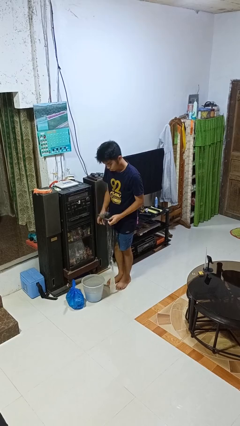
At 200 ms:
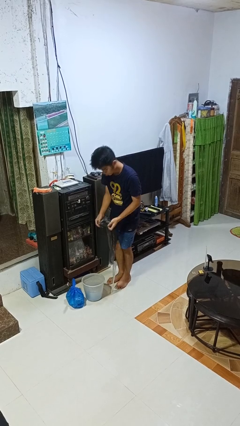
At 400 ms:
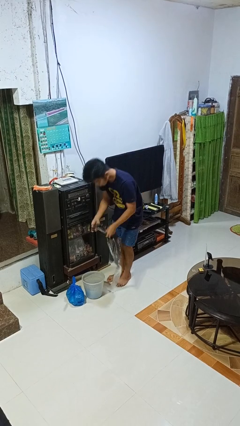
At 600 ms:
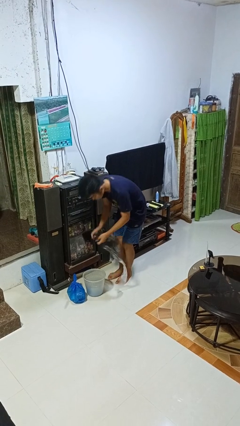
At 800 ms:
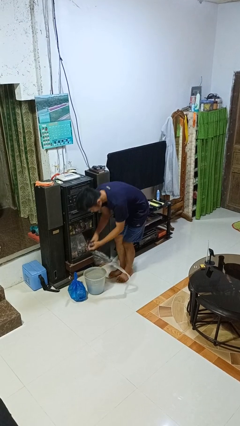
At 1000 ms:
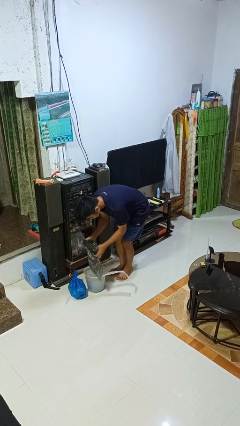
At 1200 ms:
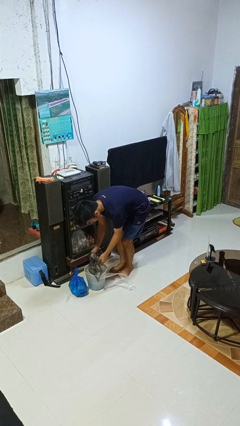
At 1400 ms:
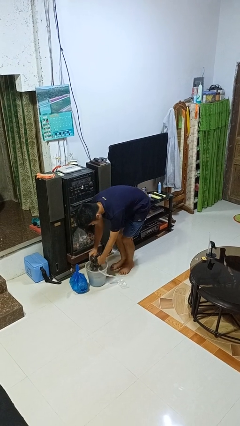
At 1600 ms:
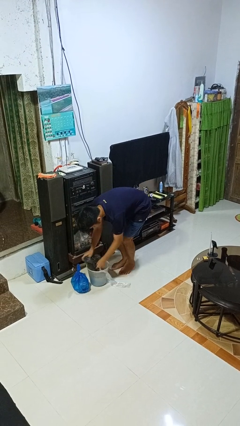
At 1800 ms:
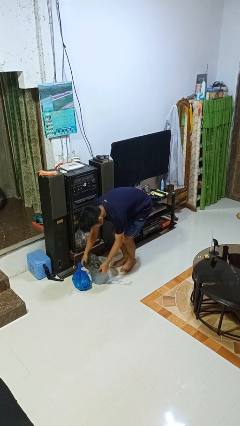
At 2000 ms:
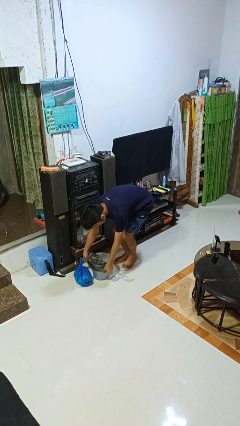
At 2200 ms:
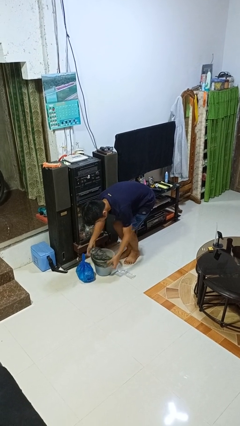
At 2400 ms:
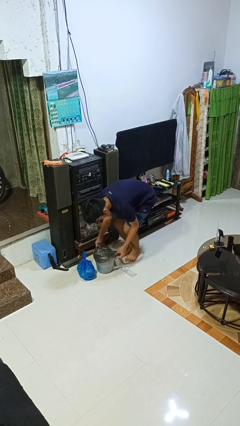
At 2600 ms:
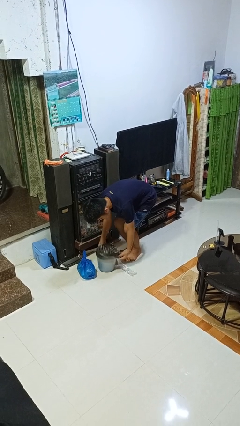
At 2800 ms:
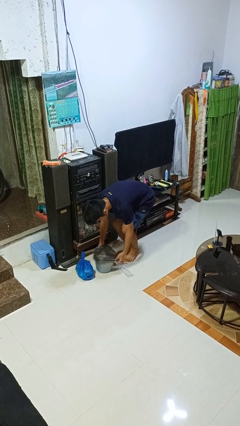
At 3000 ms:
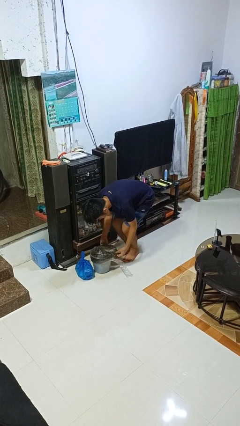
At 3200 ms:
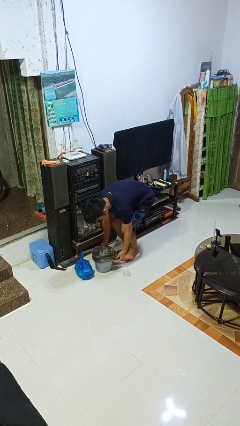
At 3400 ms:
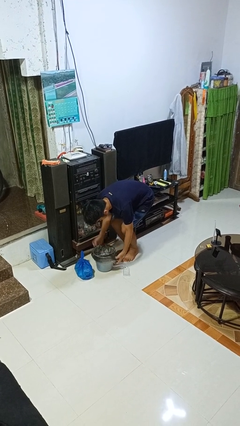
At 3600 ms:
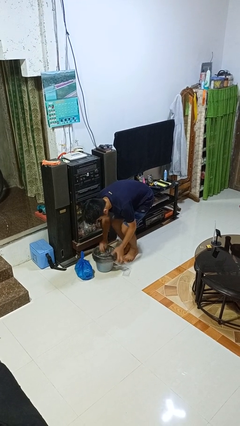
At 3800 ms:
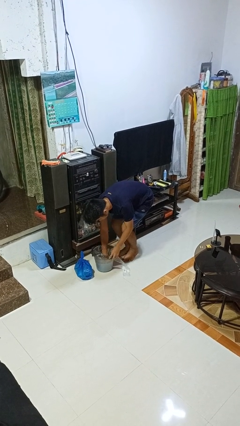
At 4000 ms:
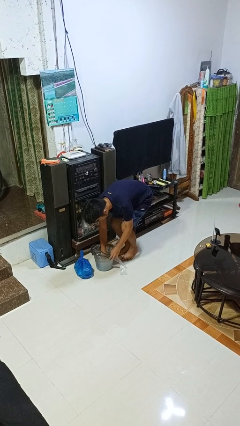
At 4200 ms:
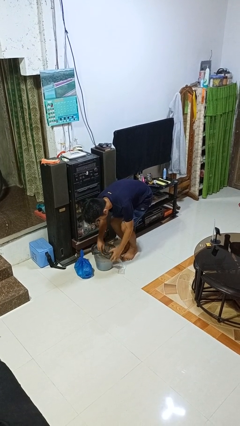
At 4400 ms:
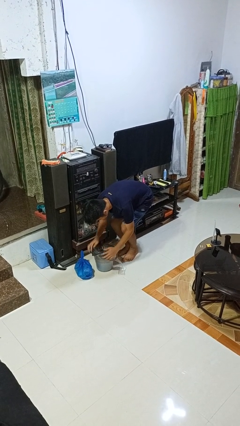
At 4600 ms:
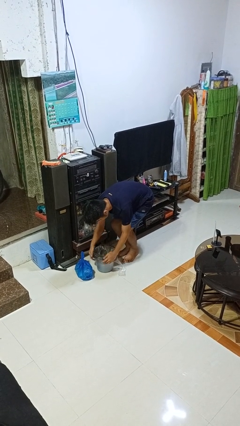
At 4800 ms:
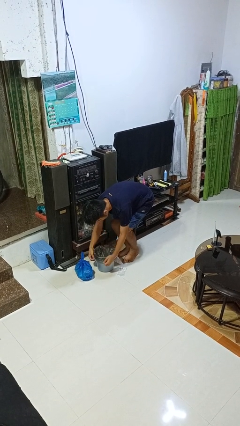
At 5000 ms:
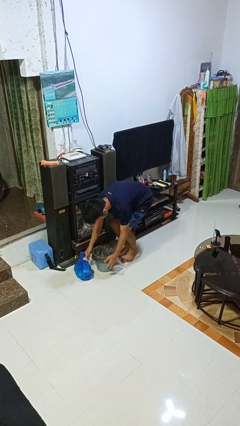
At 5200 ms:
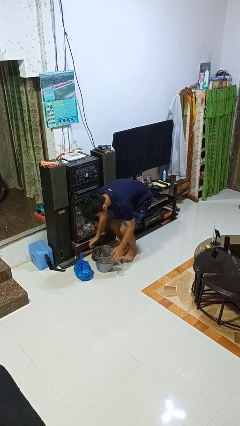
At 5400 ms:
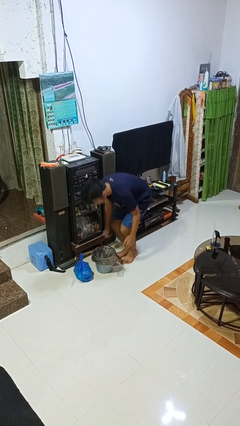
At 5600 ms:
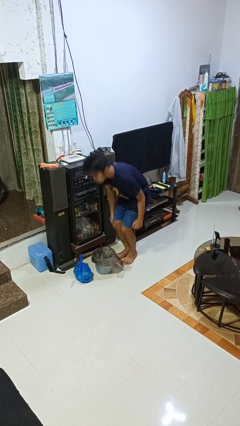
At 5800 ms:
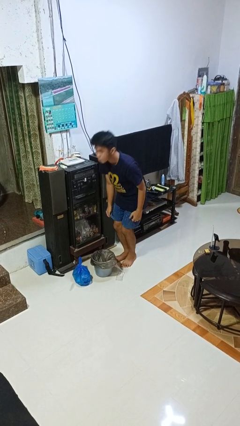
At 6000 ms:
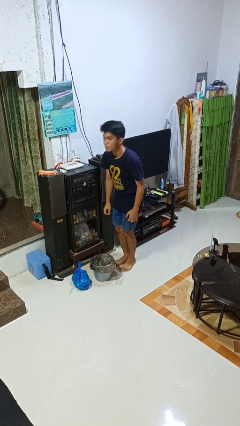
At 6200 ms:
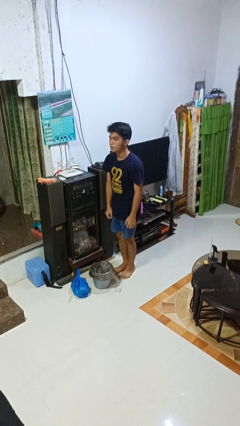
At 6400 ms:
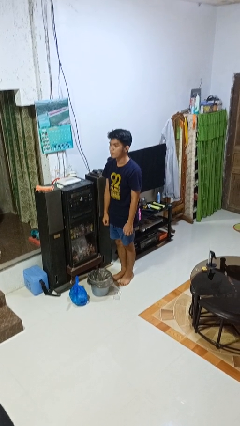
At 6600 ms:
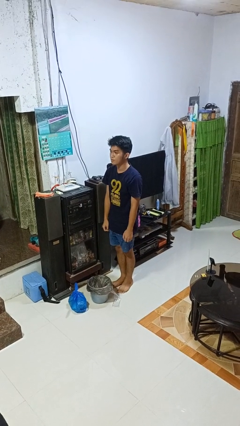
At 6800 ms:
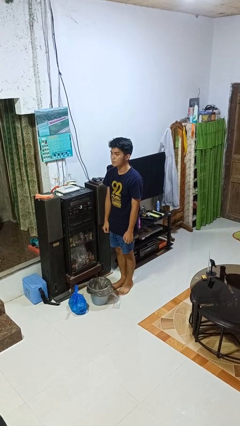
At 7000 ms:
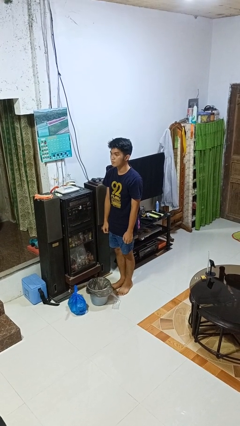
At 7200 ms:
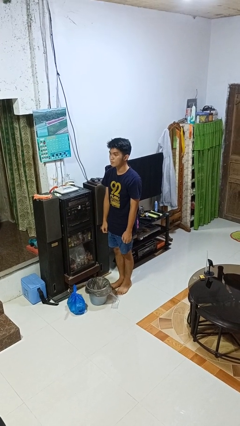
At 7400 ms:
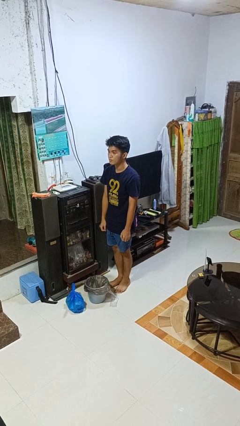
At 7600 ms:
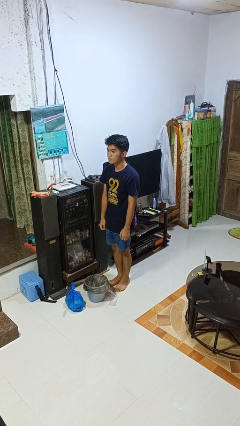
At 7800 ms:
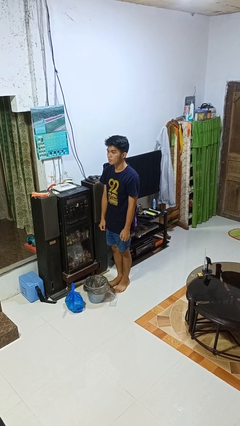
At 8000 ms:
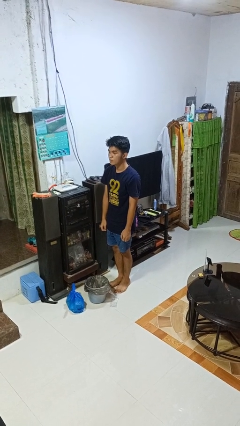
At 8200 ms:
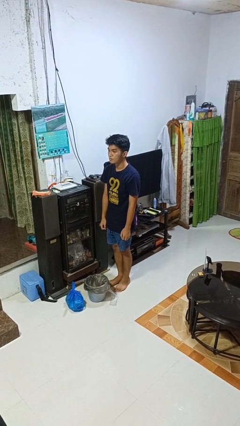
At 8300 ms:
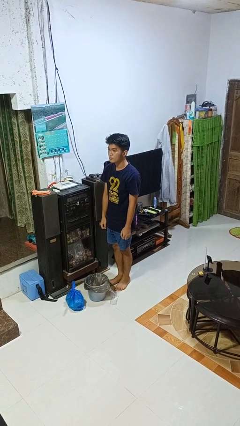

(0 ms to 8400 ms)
person inserts trashbag into trashcan

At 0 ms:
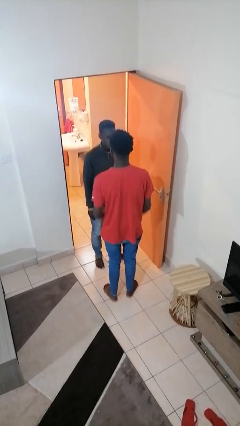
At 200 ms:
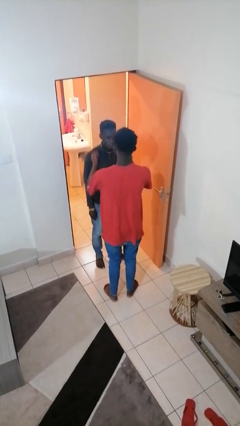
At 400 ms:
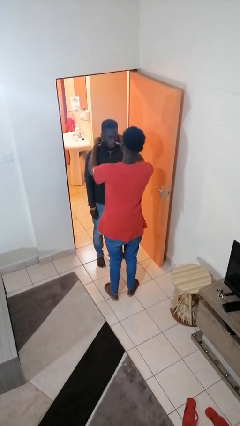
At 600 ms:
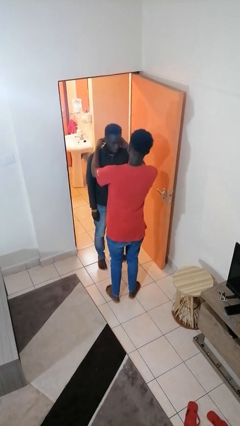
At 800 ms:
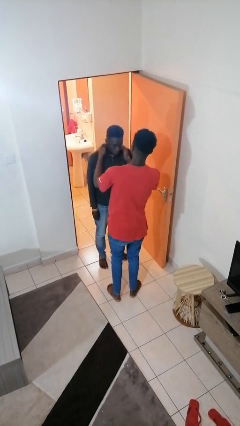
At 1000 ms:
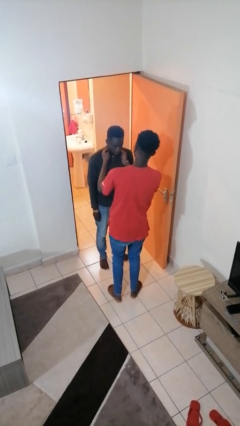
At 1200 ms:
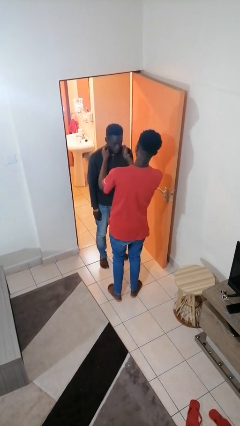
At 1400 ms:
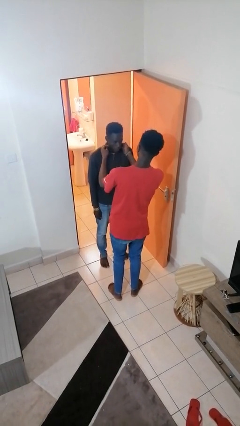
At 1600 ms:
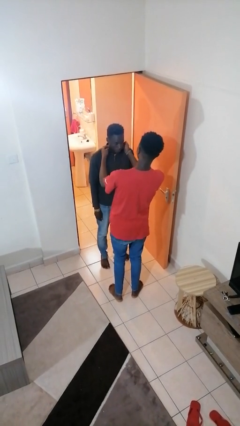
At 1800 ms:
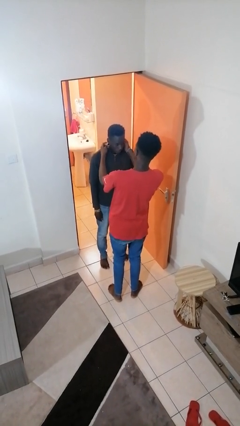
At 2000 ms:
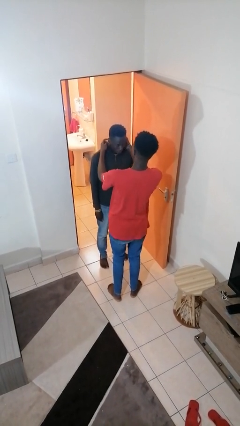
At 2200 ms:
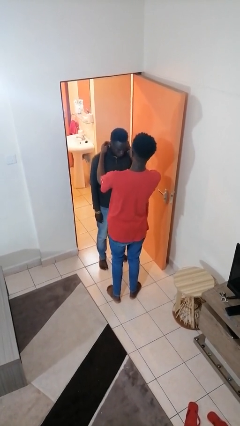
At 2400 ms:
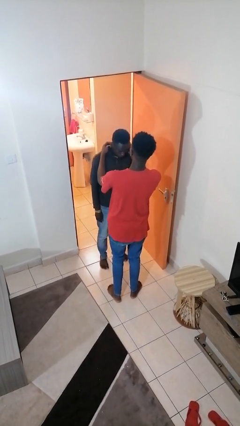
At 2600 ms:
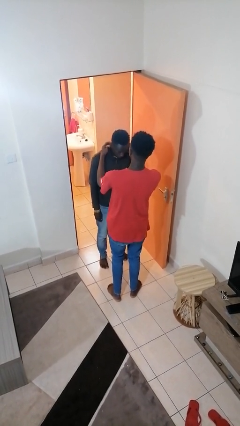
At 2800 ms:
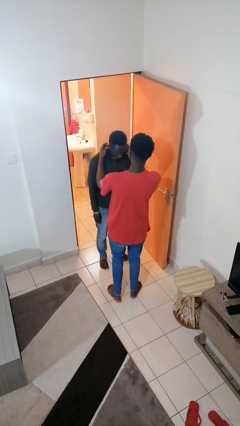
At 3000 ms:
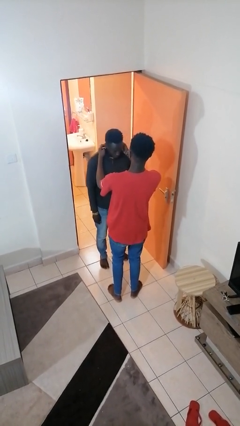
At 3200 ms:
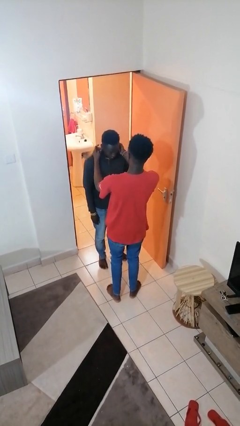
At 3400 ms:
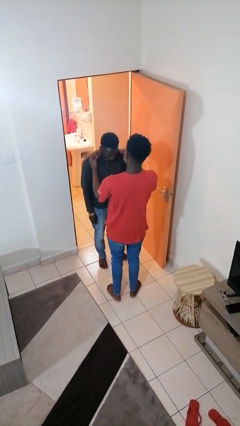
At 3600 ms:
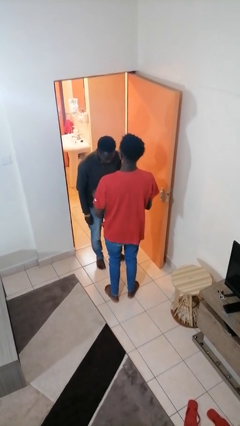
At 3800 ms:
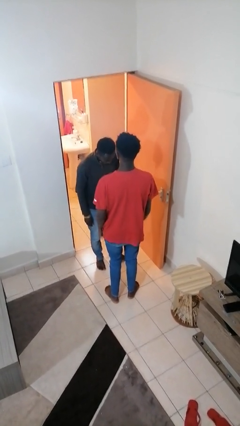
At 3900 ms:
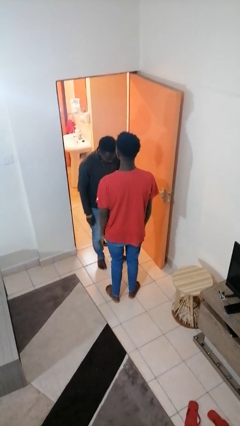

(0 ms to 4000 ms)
person tickles person

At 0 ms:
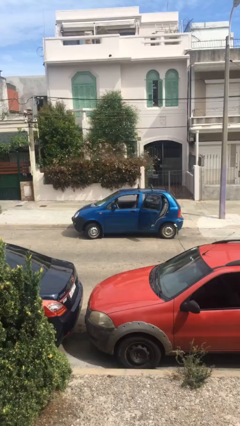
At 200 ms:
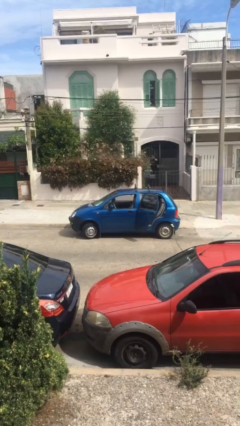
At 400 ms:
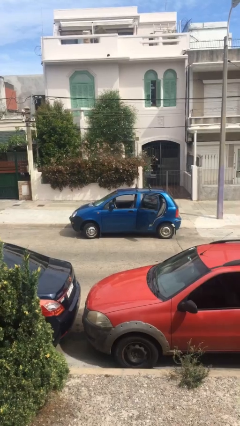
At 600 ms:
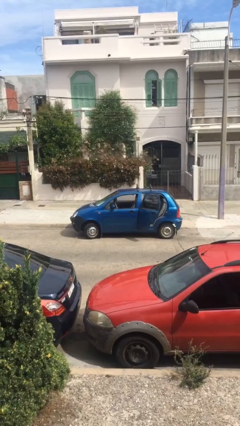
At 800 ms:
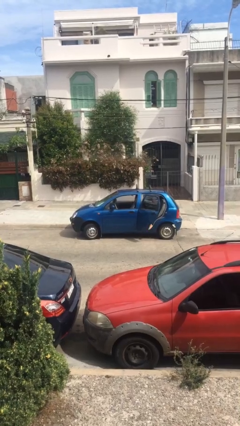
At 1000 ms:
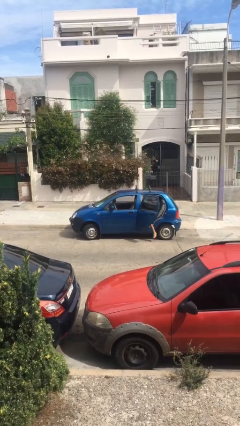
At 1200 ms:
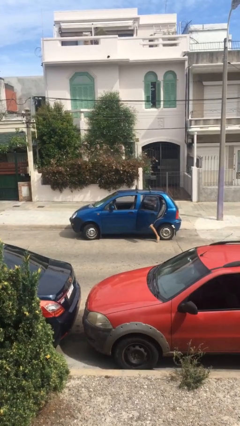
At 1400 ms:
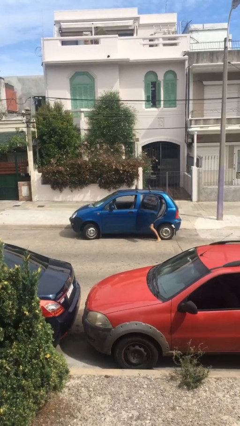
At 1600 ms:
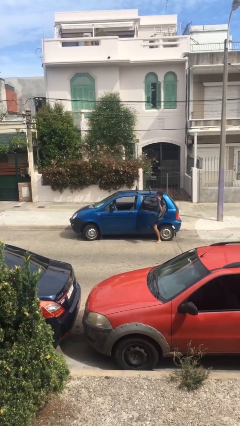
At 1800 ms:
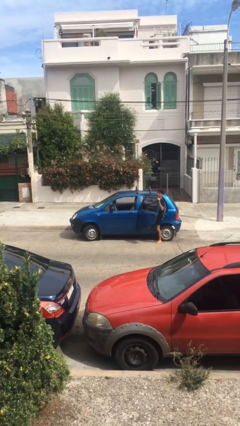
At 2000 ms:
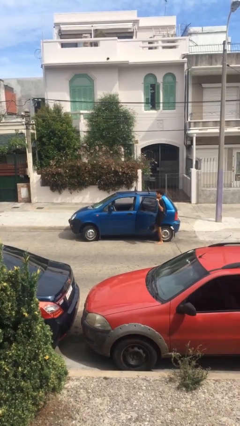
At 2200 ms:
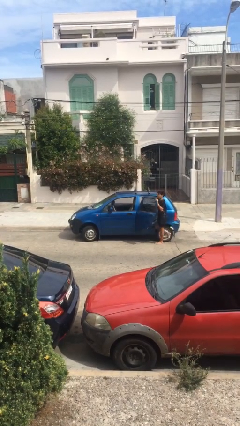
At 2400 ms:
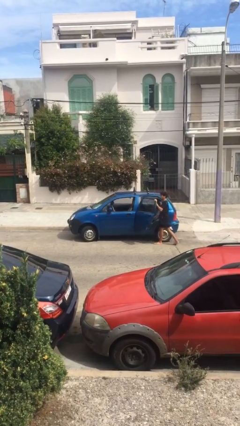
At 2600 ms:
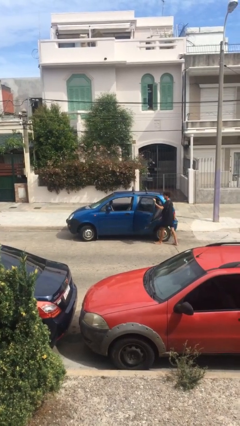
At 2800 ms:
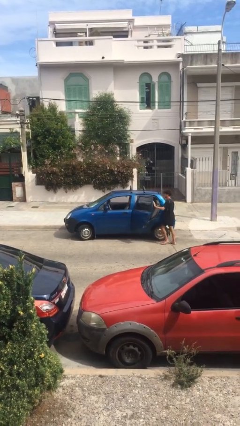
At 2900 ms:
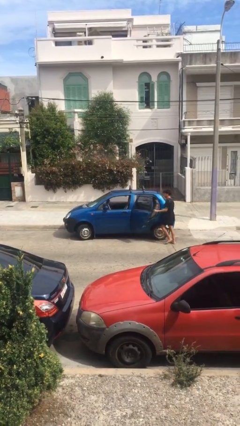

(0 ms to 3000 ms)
person exits car

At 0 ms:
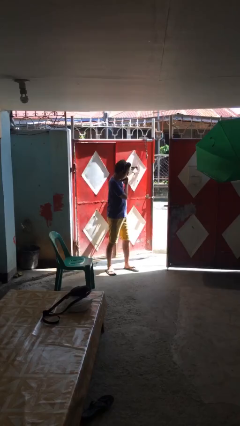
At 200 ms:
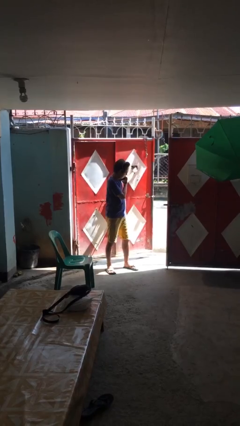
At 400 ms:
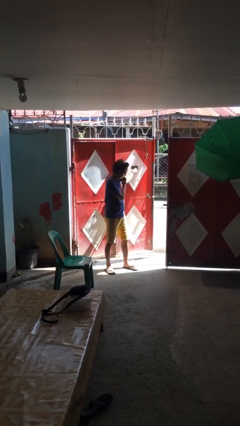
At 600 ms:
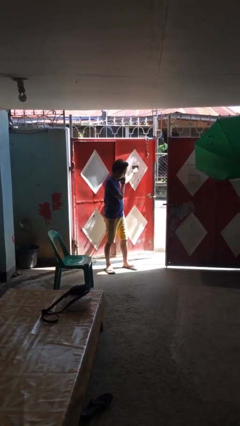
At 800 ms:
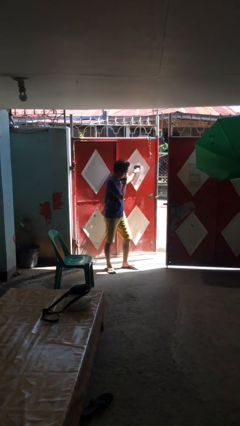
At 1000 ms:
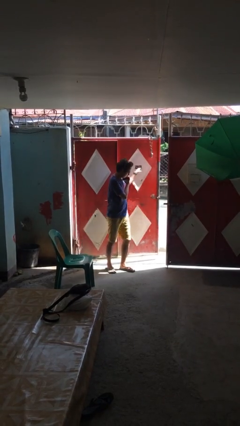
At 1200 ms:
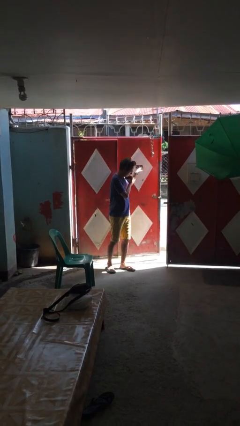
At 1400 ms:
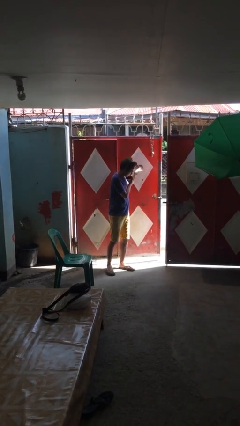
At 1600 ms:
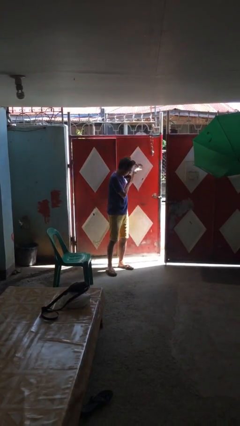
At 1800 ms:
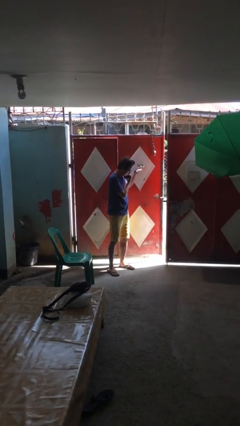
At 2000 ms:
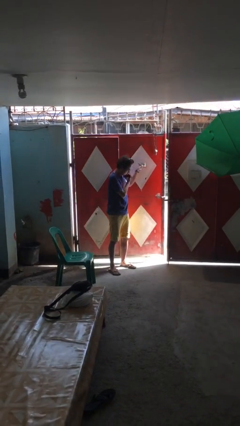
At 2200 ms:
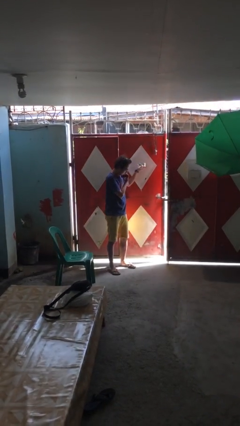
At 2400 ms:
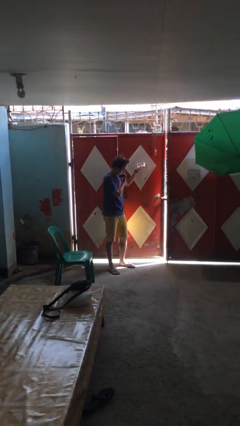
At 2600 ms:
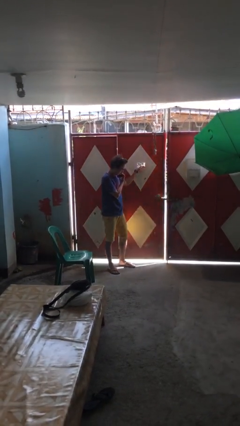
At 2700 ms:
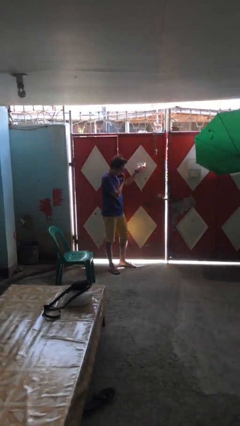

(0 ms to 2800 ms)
person closes facility door
